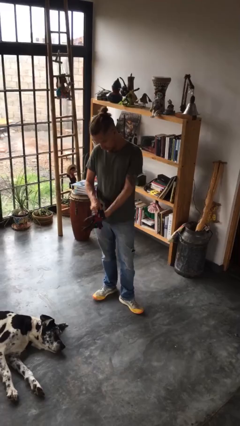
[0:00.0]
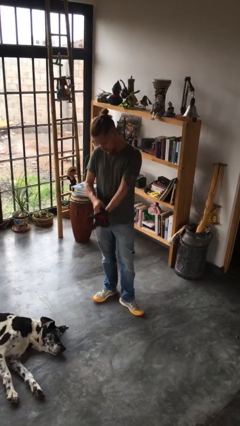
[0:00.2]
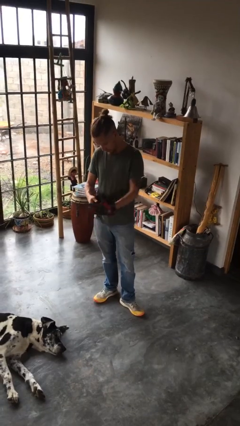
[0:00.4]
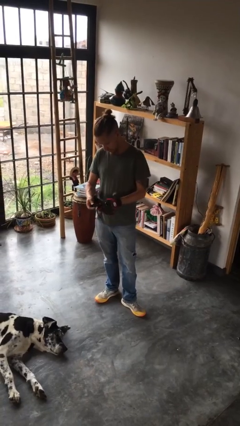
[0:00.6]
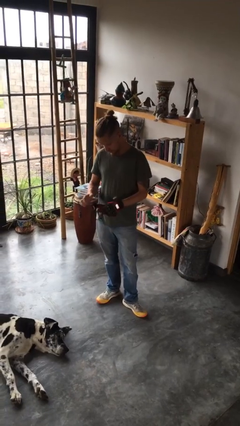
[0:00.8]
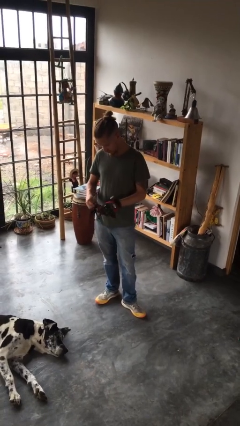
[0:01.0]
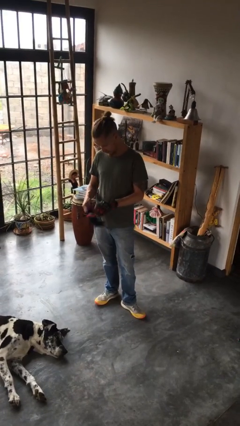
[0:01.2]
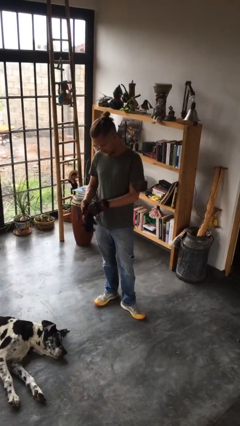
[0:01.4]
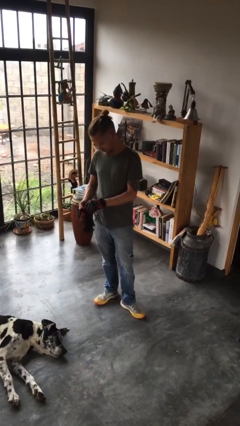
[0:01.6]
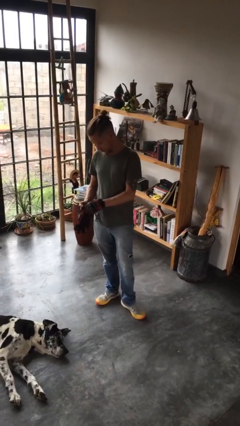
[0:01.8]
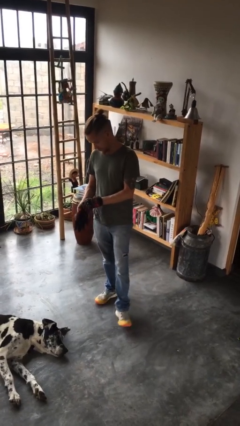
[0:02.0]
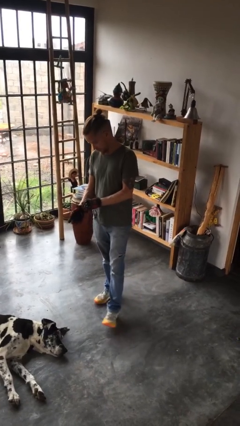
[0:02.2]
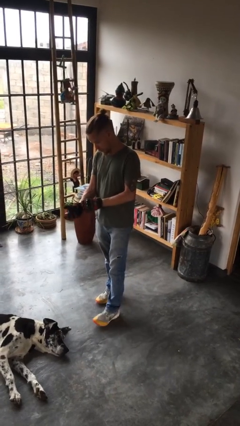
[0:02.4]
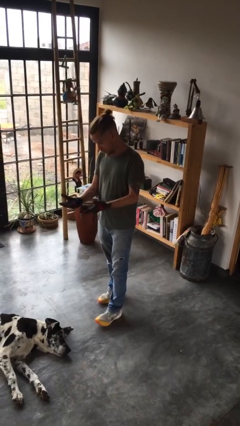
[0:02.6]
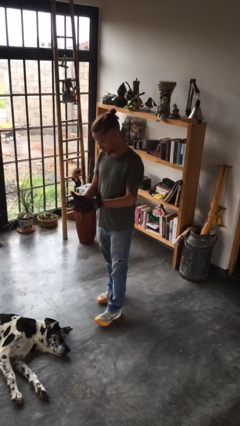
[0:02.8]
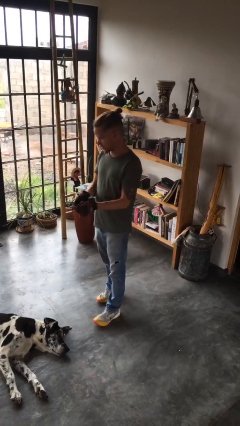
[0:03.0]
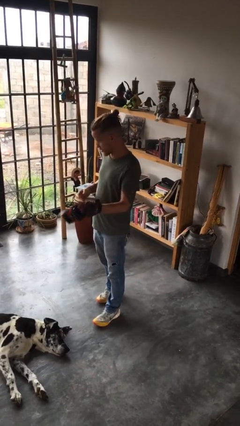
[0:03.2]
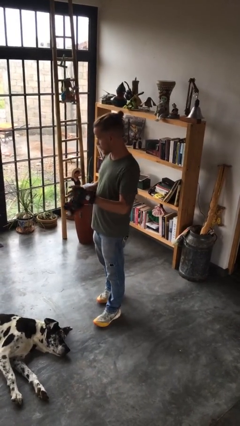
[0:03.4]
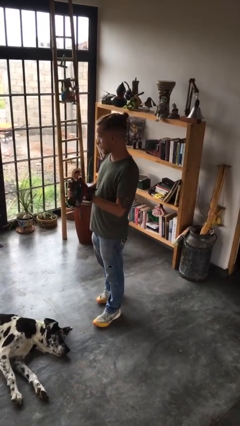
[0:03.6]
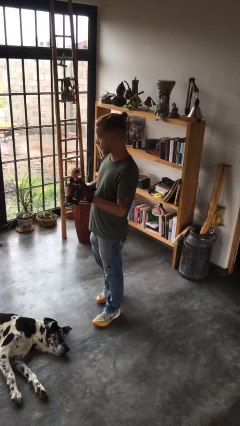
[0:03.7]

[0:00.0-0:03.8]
person takes off gloves

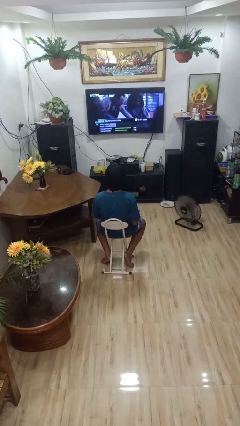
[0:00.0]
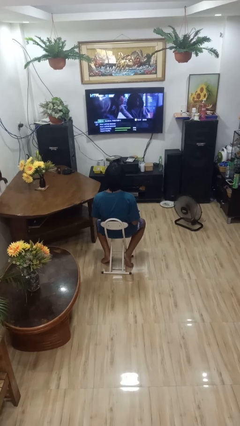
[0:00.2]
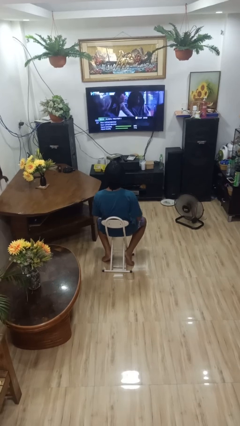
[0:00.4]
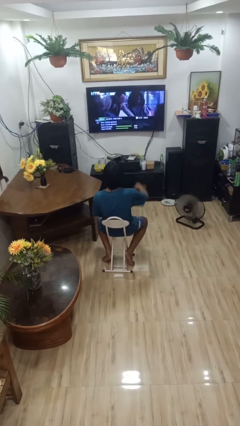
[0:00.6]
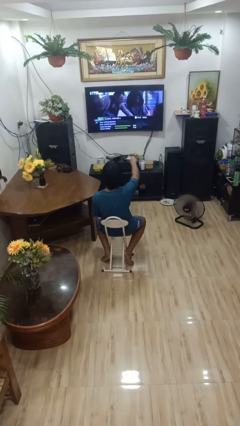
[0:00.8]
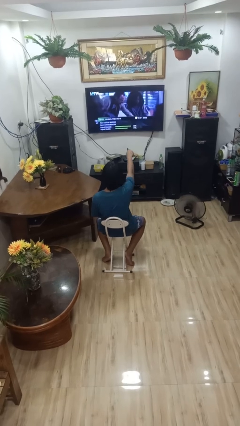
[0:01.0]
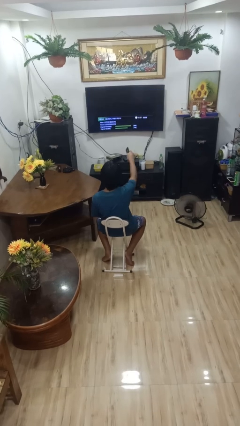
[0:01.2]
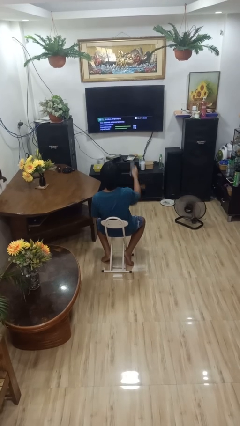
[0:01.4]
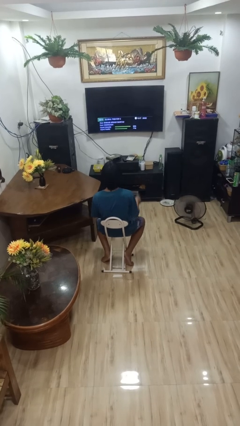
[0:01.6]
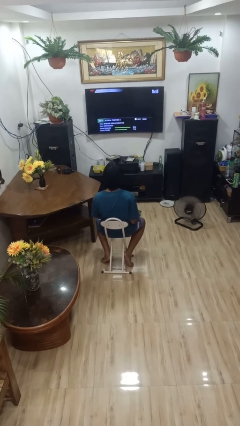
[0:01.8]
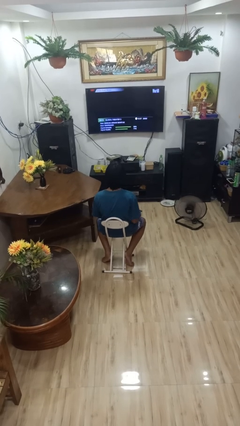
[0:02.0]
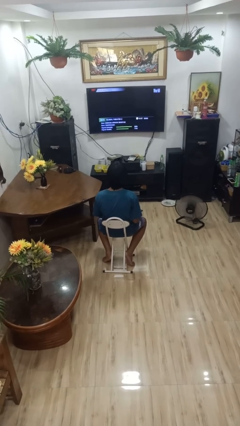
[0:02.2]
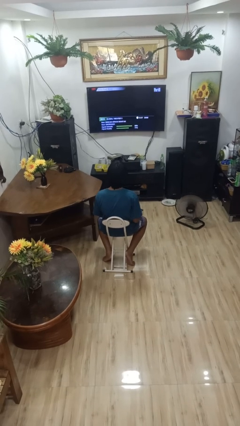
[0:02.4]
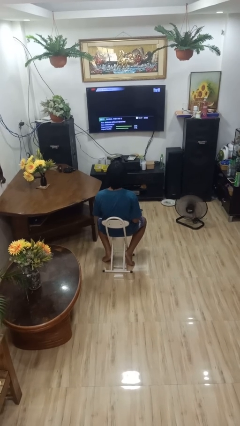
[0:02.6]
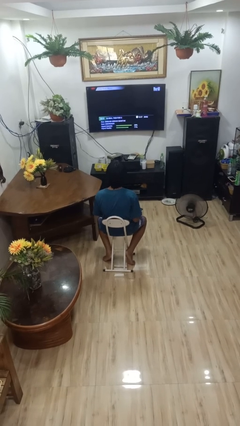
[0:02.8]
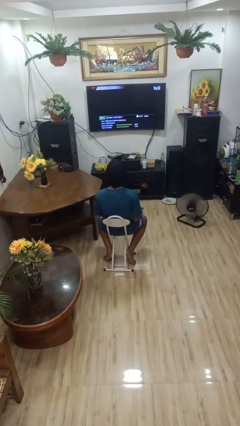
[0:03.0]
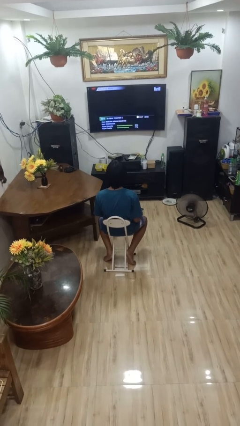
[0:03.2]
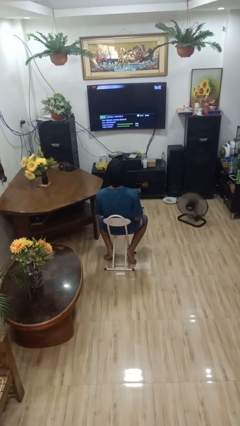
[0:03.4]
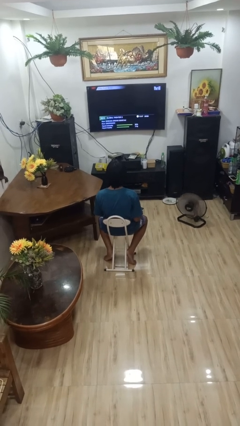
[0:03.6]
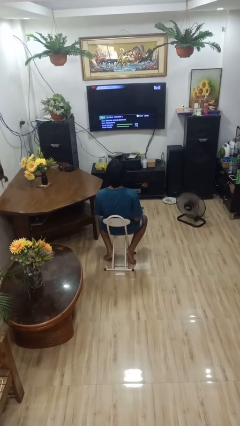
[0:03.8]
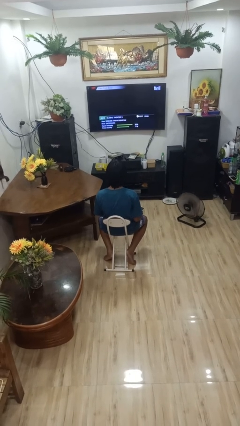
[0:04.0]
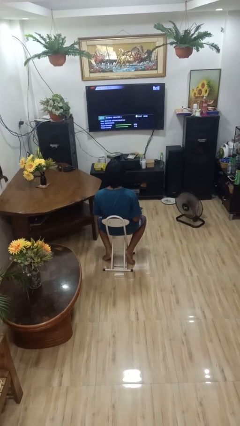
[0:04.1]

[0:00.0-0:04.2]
person uses television remote

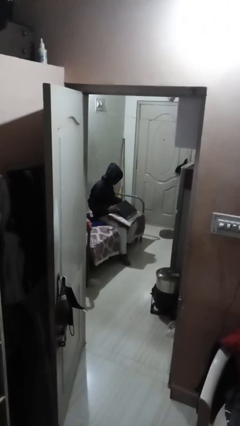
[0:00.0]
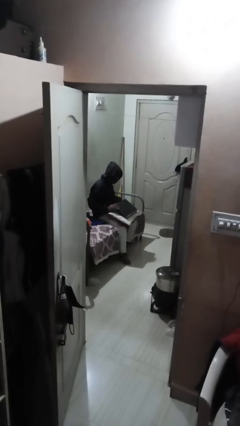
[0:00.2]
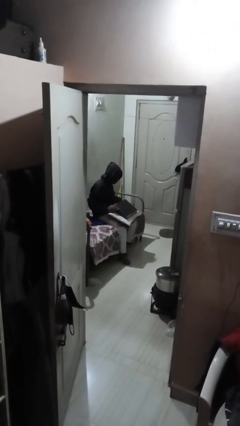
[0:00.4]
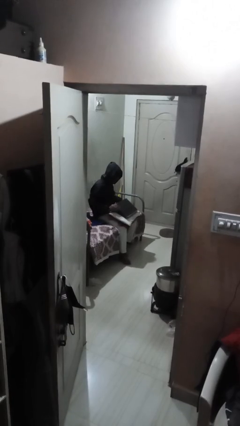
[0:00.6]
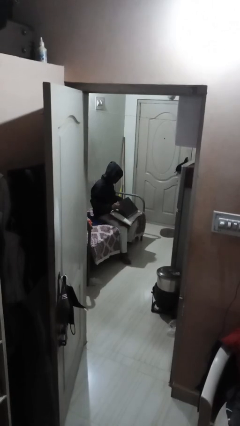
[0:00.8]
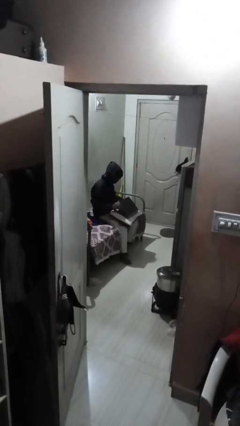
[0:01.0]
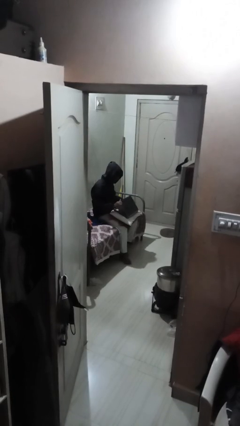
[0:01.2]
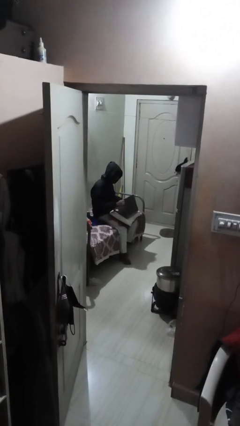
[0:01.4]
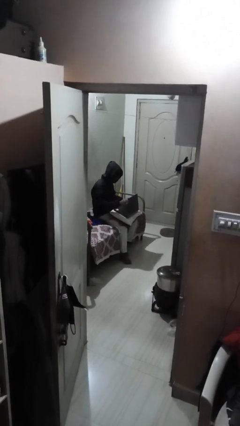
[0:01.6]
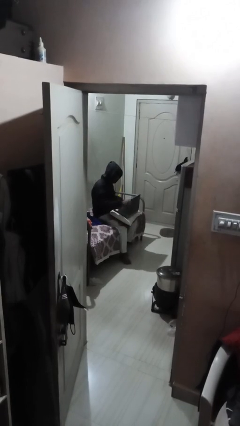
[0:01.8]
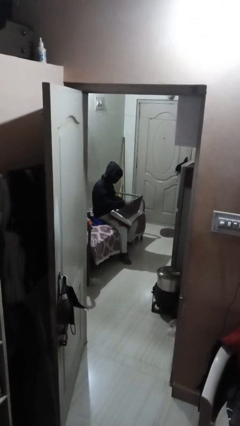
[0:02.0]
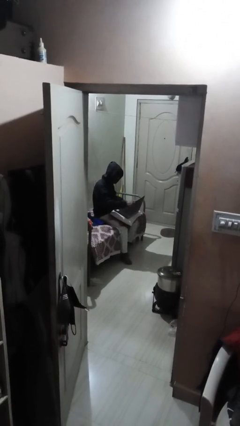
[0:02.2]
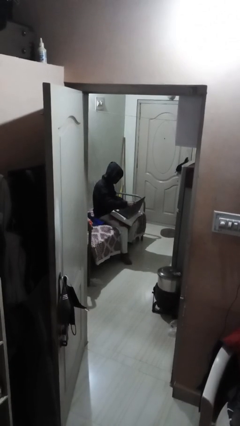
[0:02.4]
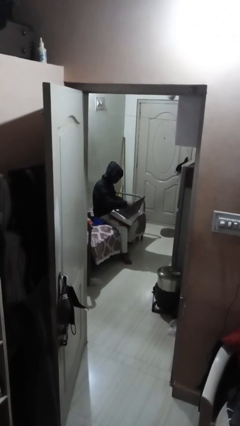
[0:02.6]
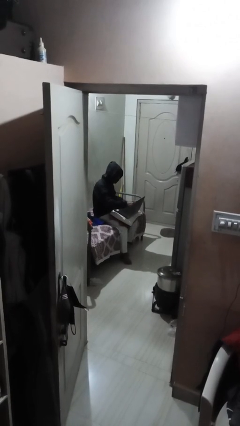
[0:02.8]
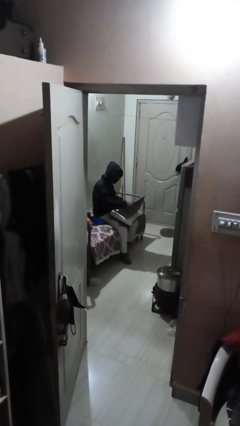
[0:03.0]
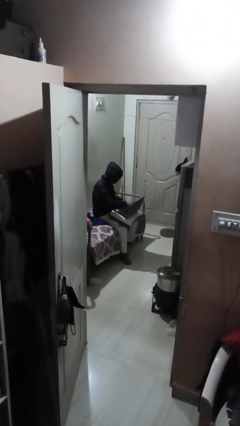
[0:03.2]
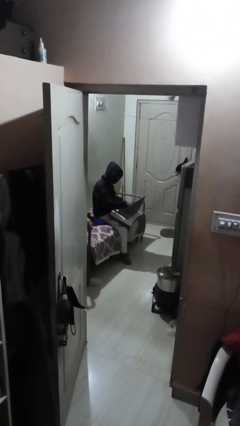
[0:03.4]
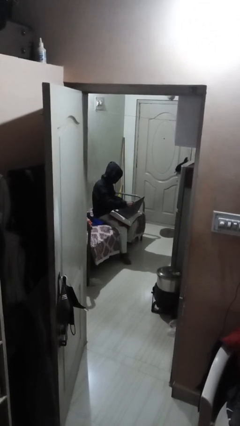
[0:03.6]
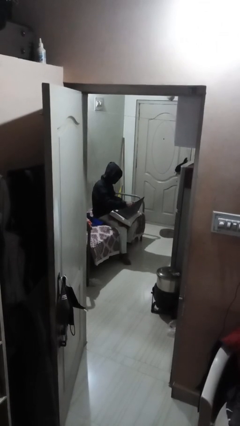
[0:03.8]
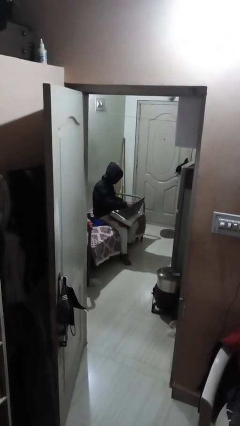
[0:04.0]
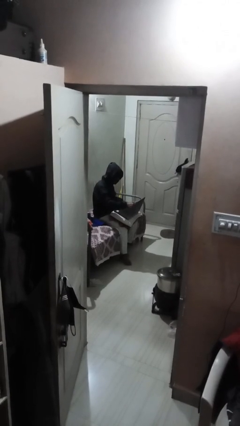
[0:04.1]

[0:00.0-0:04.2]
person interacts with laptop

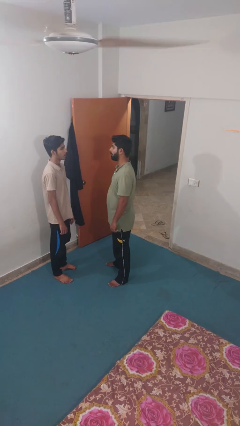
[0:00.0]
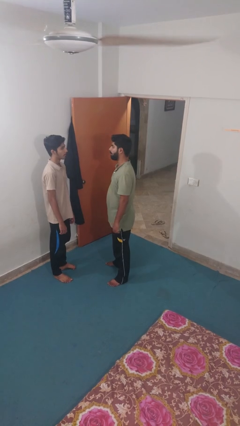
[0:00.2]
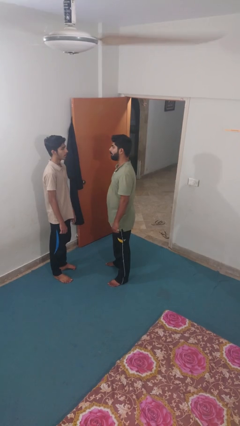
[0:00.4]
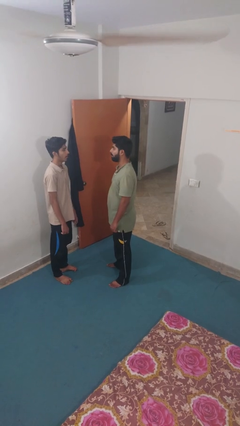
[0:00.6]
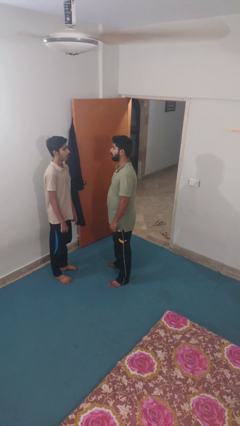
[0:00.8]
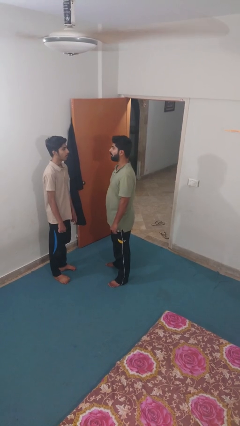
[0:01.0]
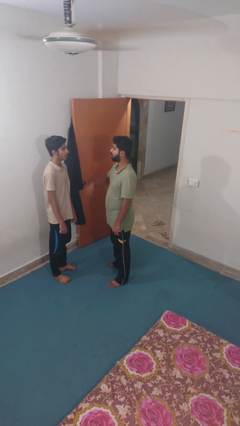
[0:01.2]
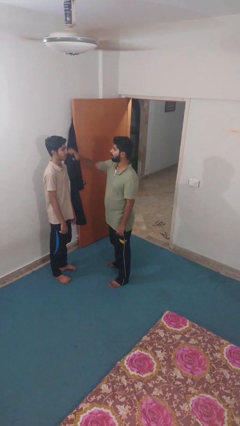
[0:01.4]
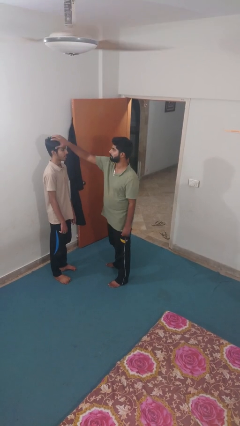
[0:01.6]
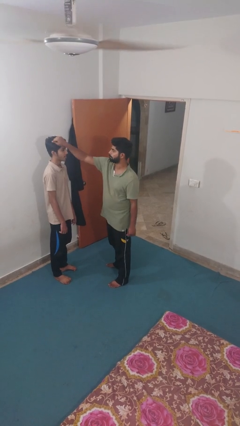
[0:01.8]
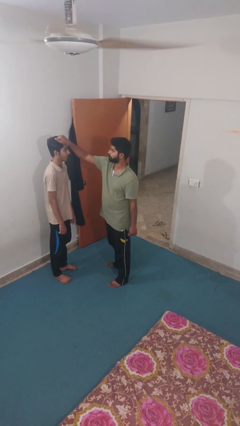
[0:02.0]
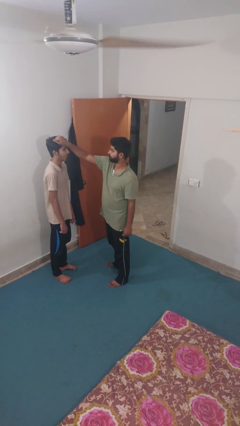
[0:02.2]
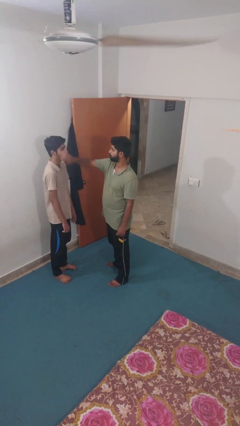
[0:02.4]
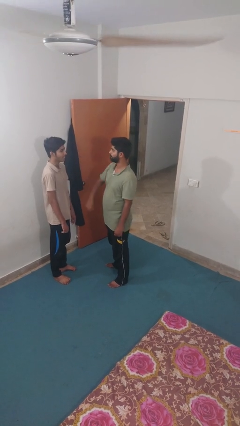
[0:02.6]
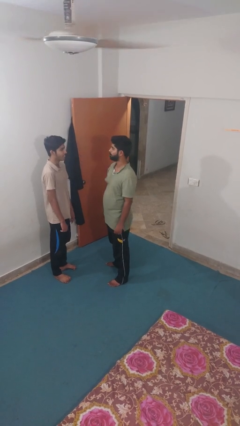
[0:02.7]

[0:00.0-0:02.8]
person grabs person by hair

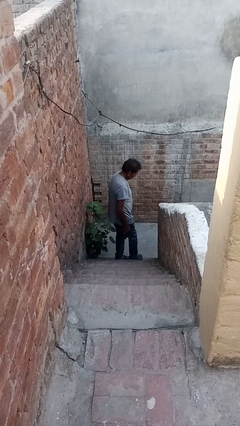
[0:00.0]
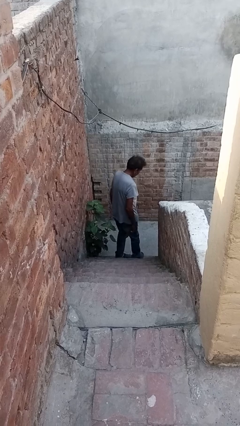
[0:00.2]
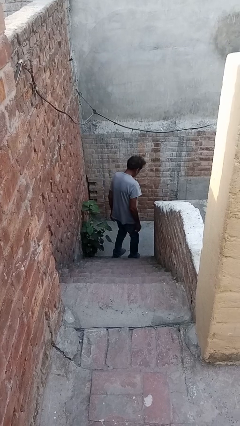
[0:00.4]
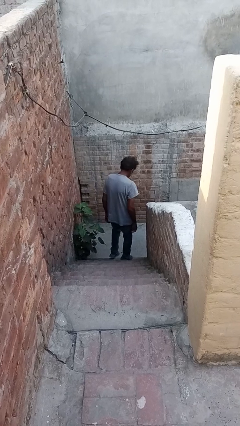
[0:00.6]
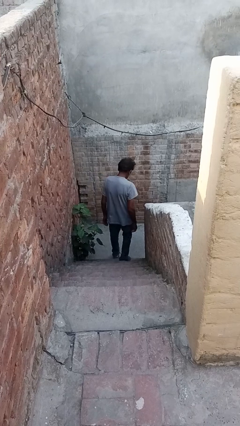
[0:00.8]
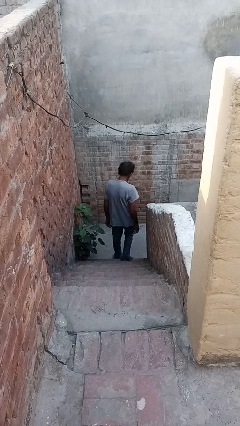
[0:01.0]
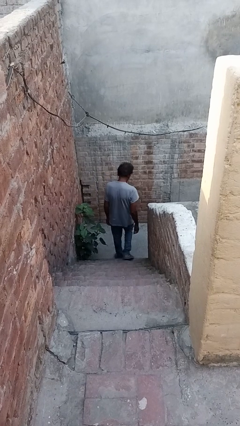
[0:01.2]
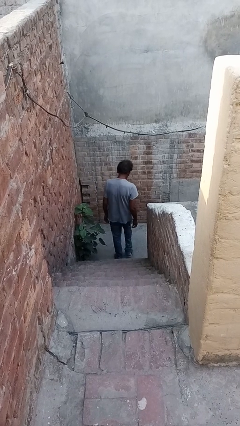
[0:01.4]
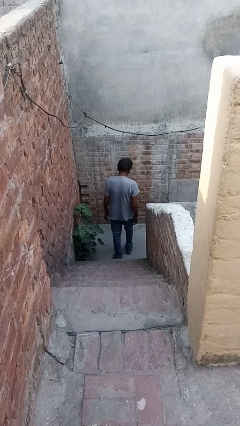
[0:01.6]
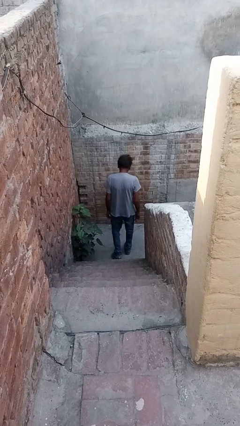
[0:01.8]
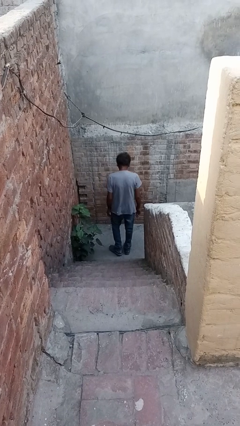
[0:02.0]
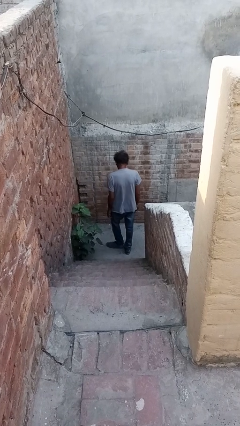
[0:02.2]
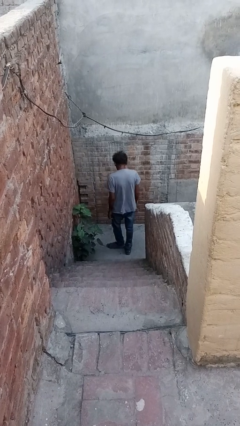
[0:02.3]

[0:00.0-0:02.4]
person climbs down stairs

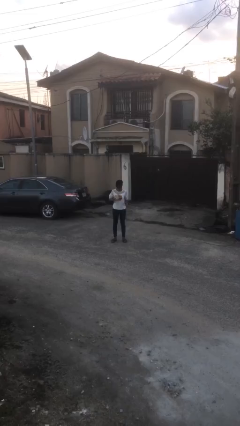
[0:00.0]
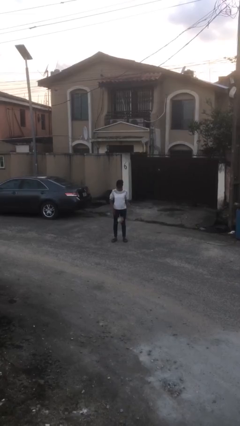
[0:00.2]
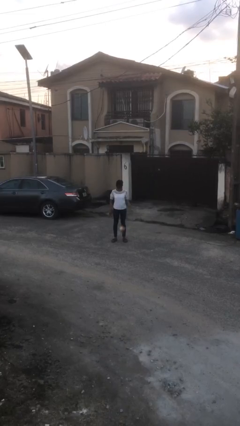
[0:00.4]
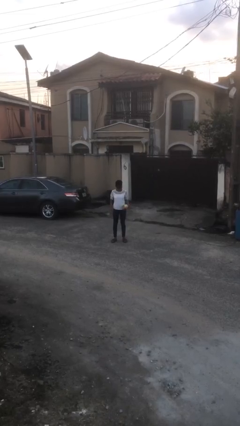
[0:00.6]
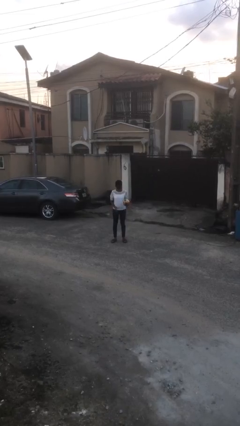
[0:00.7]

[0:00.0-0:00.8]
person bounces ball on floor
